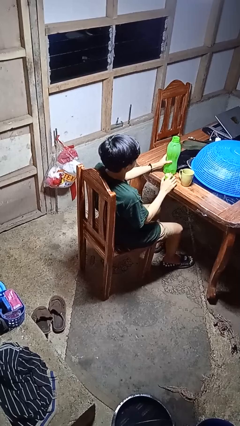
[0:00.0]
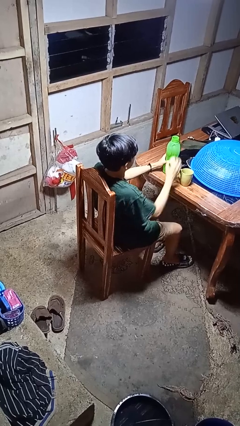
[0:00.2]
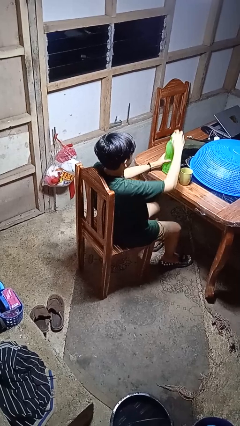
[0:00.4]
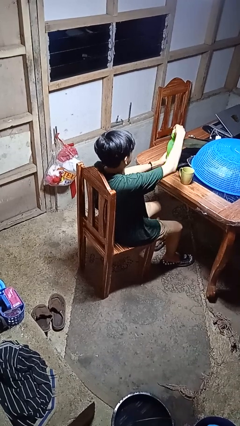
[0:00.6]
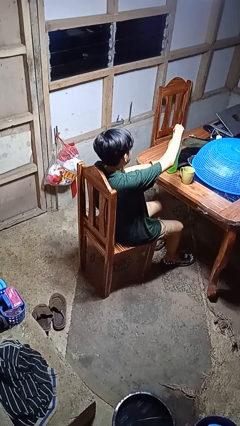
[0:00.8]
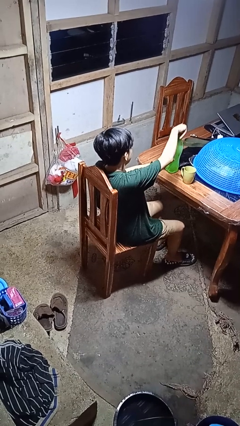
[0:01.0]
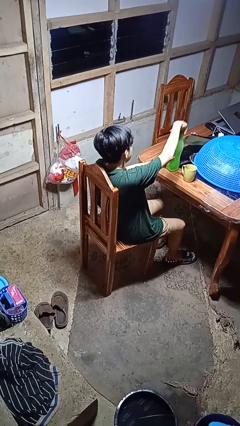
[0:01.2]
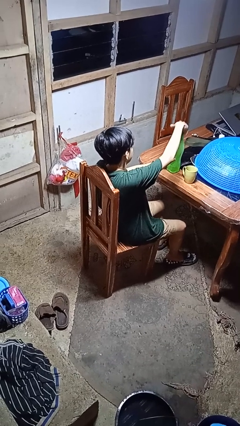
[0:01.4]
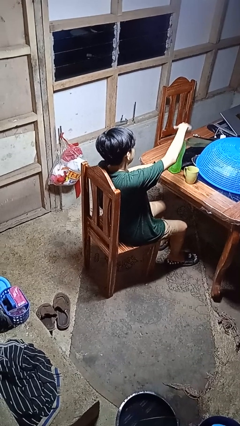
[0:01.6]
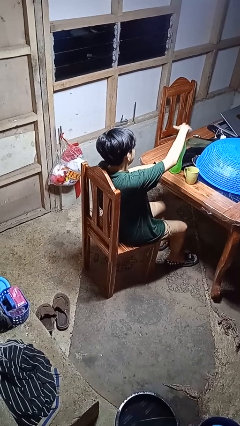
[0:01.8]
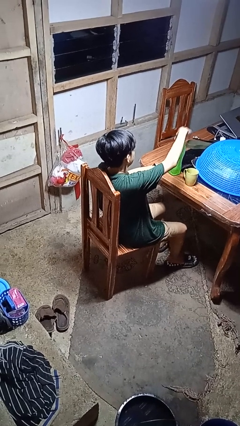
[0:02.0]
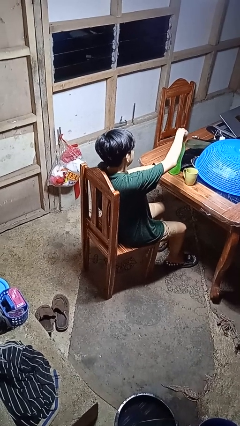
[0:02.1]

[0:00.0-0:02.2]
person screws lid to bottle

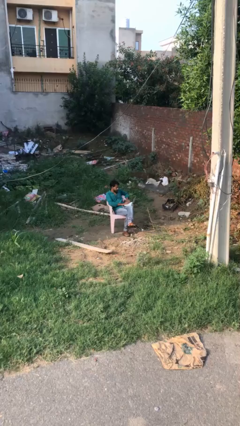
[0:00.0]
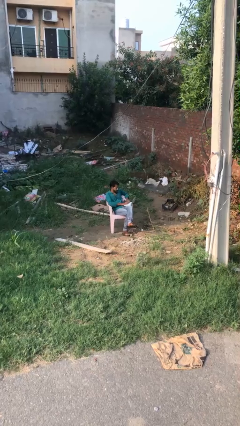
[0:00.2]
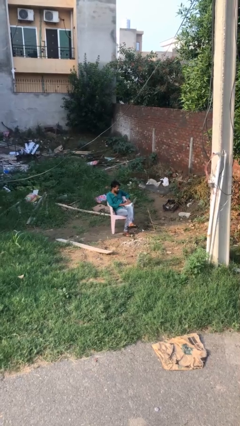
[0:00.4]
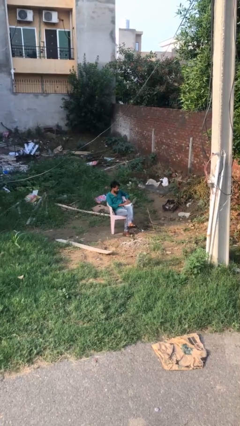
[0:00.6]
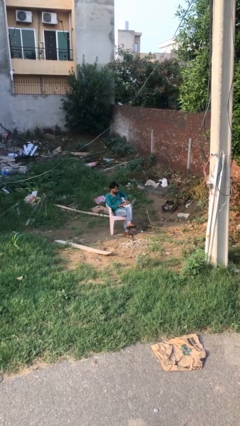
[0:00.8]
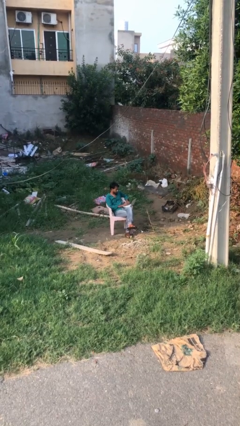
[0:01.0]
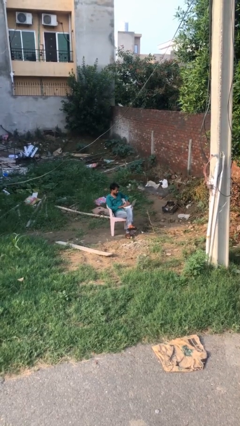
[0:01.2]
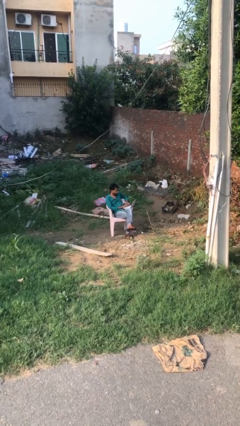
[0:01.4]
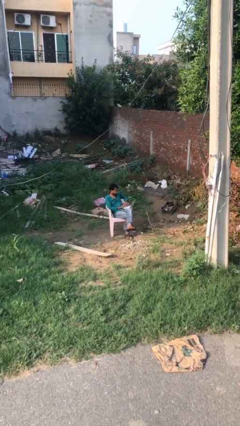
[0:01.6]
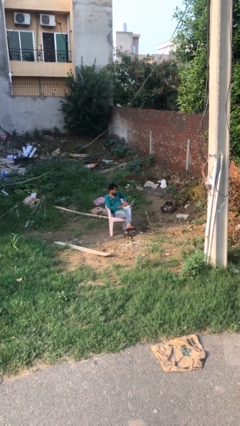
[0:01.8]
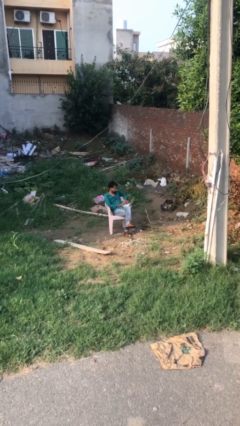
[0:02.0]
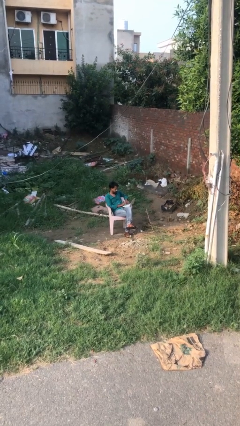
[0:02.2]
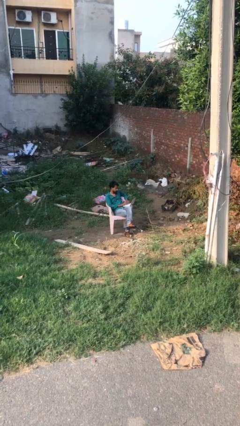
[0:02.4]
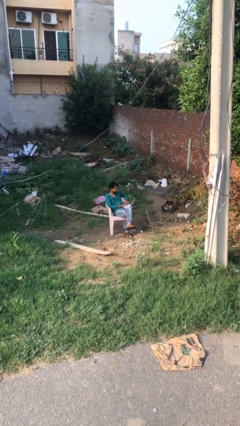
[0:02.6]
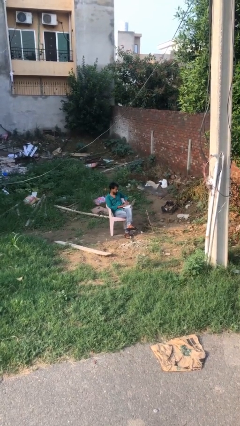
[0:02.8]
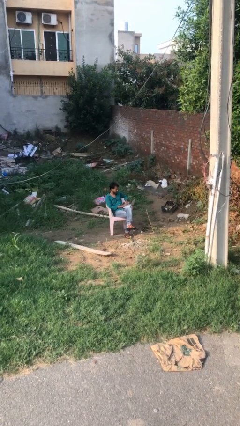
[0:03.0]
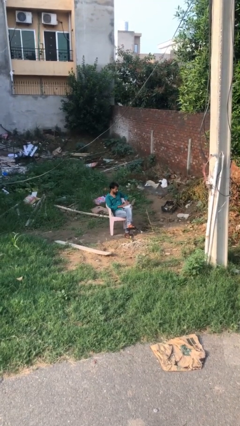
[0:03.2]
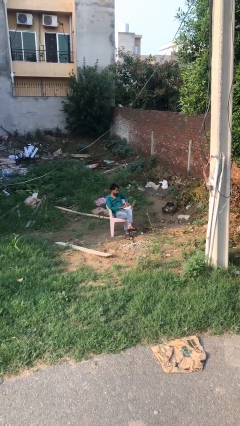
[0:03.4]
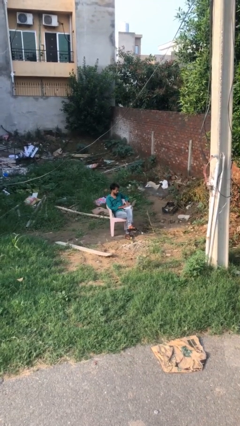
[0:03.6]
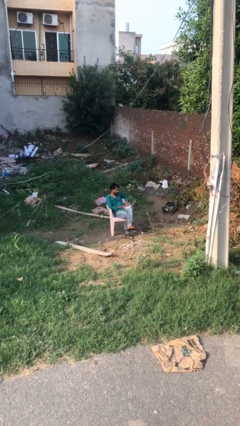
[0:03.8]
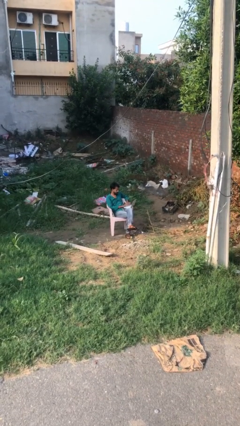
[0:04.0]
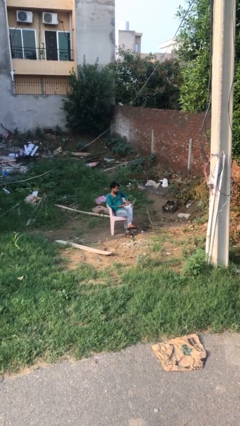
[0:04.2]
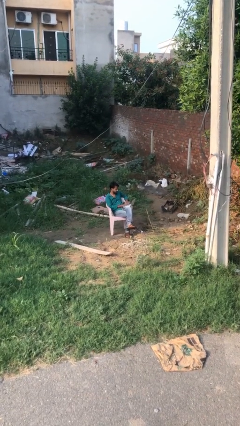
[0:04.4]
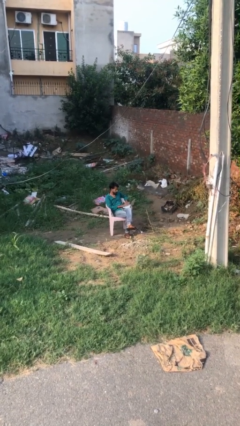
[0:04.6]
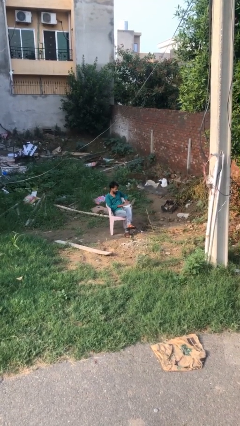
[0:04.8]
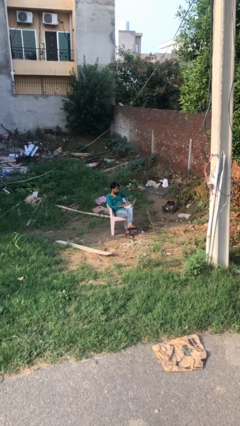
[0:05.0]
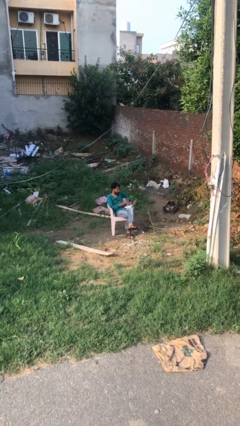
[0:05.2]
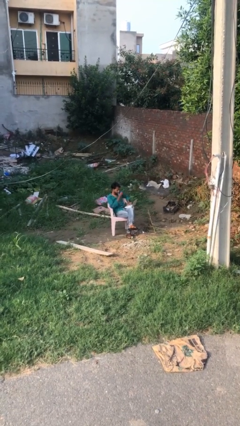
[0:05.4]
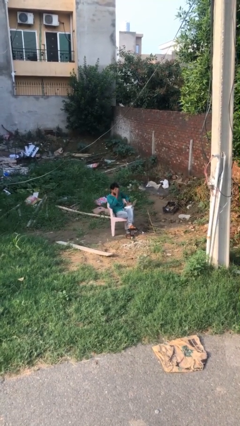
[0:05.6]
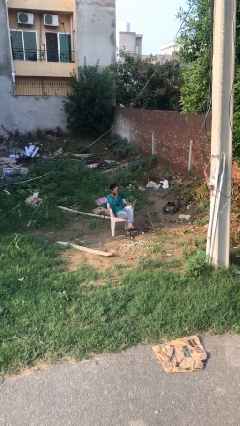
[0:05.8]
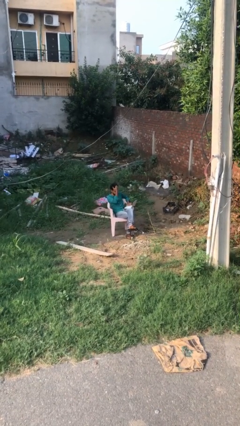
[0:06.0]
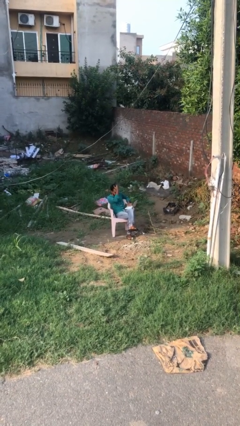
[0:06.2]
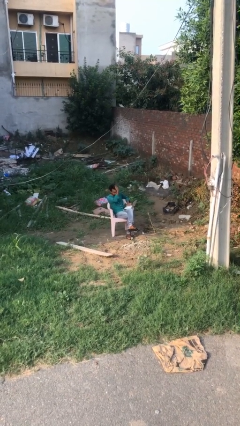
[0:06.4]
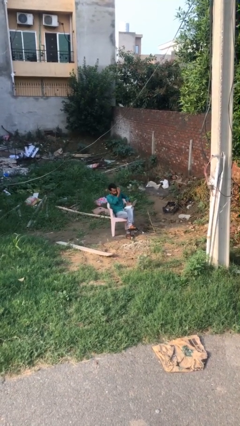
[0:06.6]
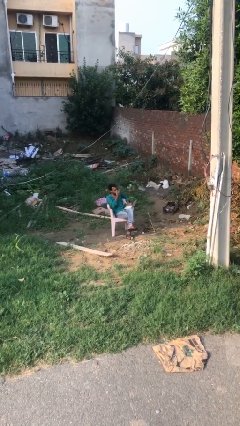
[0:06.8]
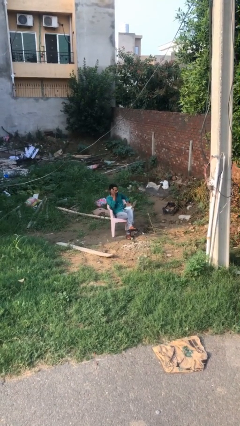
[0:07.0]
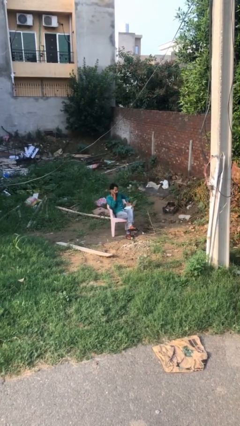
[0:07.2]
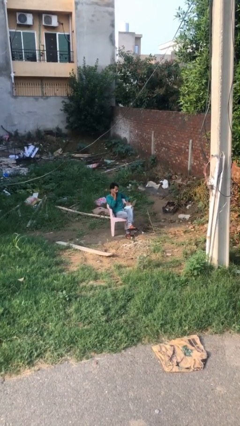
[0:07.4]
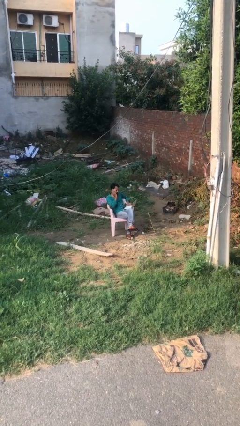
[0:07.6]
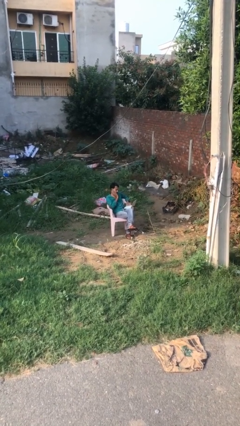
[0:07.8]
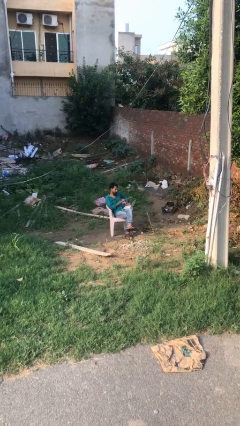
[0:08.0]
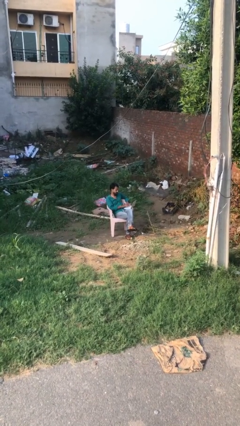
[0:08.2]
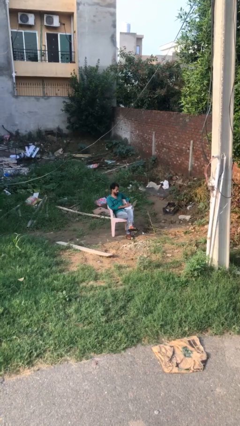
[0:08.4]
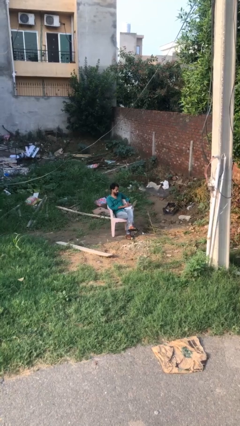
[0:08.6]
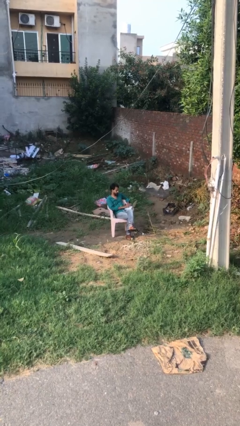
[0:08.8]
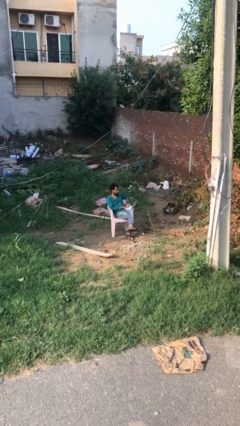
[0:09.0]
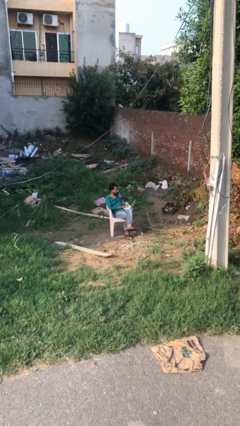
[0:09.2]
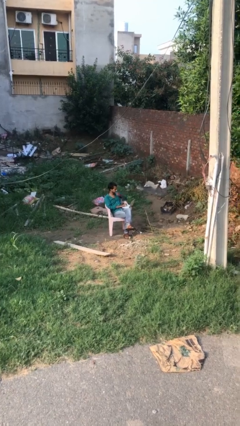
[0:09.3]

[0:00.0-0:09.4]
person interacts with laptop

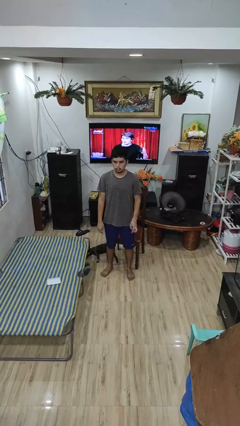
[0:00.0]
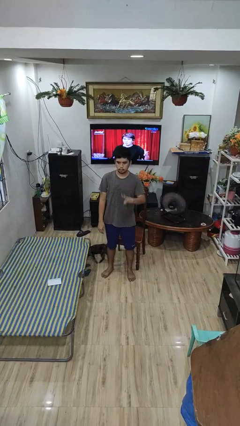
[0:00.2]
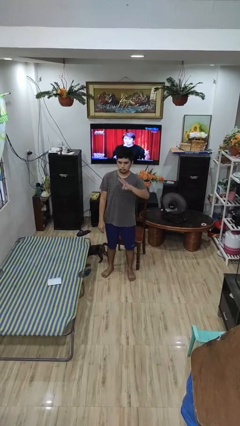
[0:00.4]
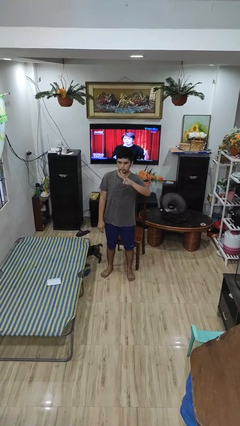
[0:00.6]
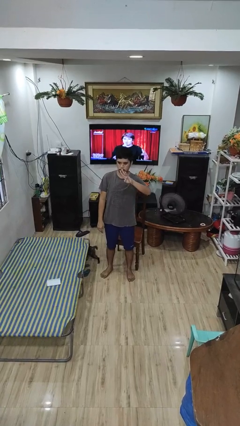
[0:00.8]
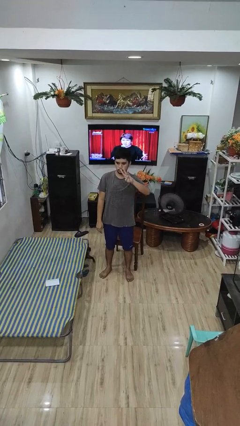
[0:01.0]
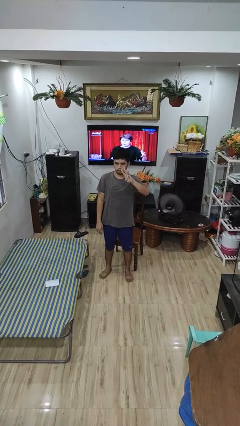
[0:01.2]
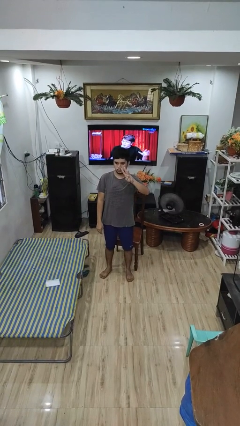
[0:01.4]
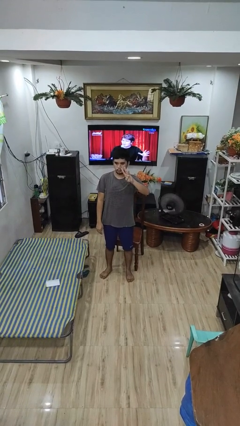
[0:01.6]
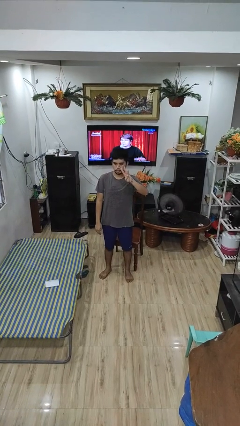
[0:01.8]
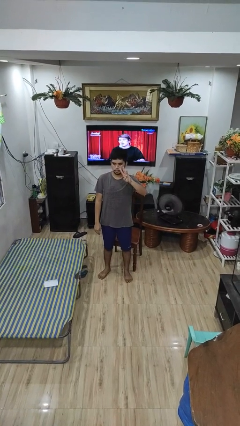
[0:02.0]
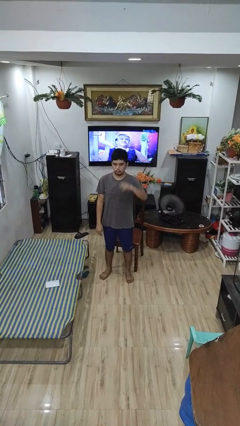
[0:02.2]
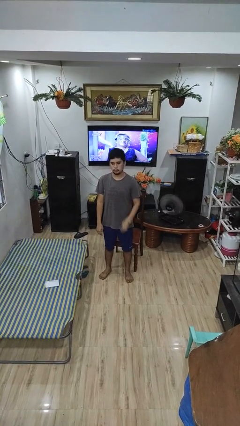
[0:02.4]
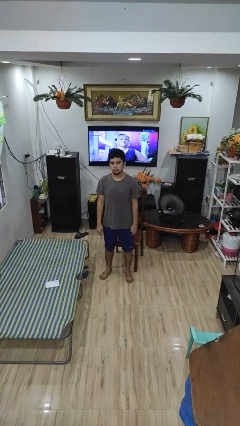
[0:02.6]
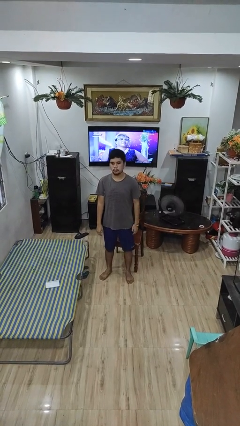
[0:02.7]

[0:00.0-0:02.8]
person gestures number three

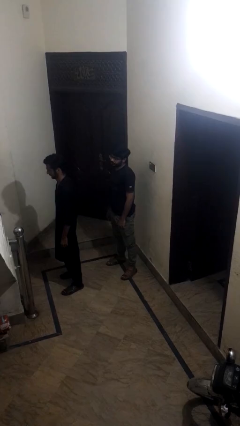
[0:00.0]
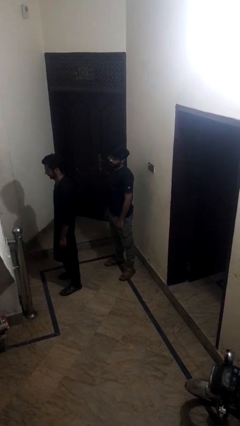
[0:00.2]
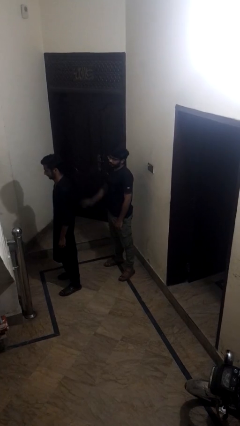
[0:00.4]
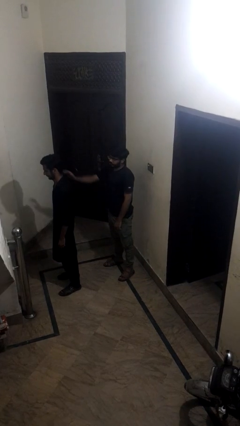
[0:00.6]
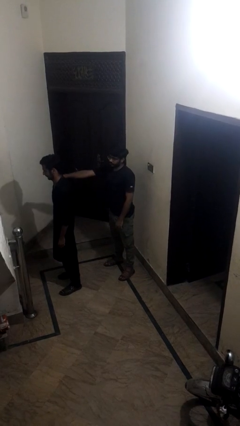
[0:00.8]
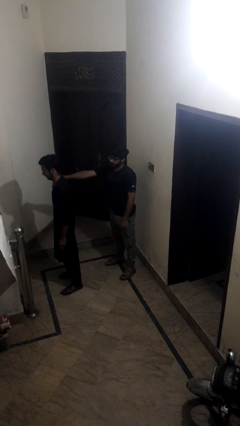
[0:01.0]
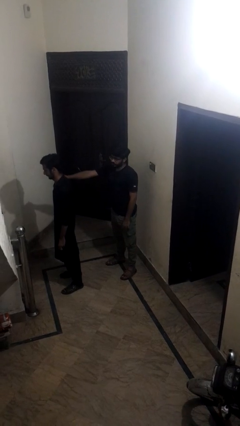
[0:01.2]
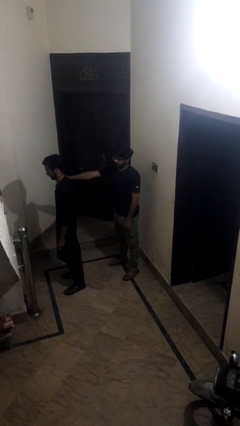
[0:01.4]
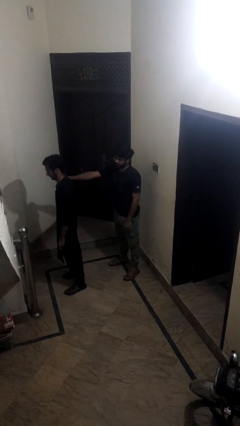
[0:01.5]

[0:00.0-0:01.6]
person grabs person by shoulder

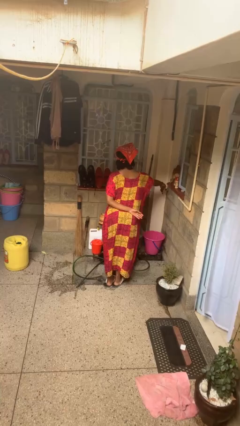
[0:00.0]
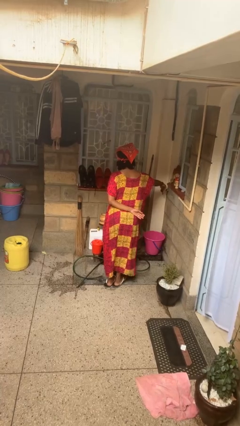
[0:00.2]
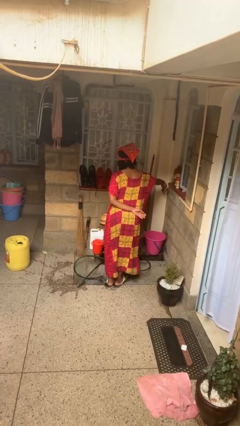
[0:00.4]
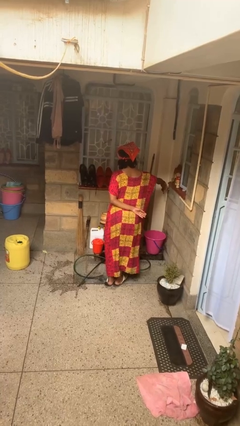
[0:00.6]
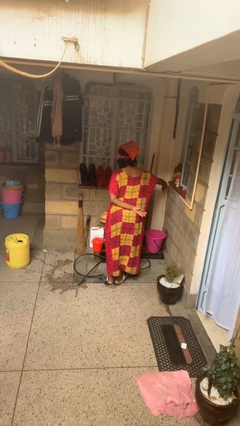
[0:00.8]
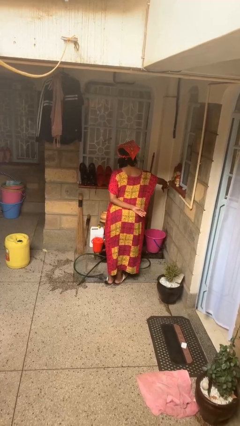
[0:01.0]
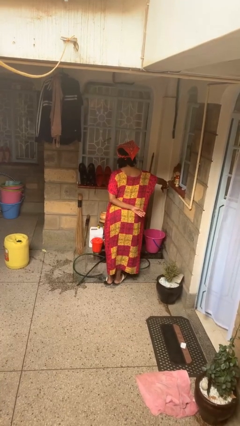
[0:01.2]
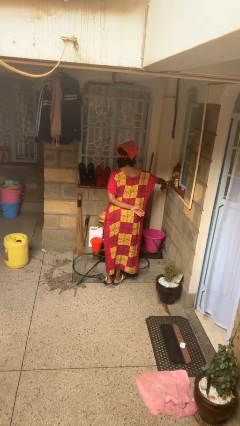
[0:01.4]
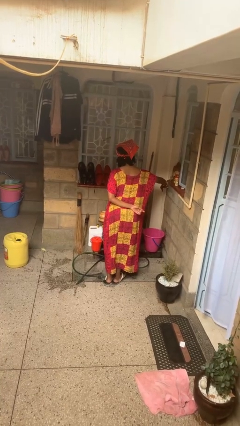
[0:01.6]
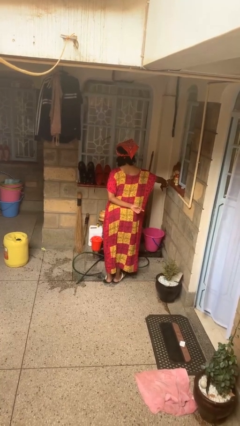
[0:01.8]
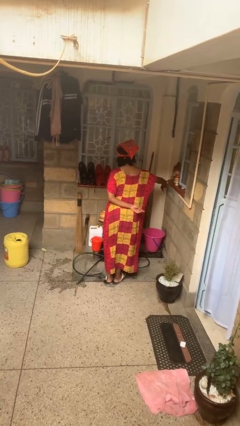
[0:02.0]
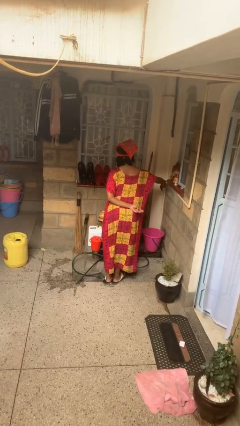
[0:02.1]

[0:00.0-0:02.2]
person turns on faucet
